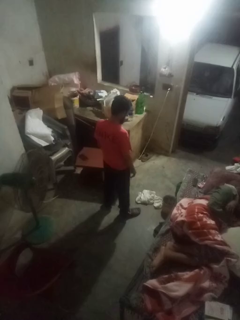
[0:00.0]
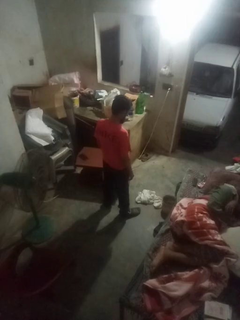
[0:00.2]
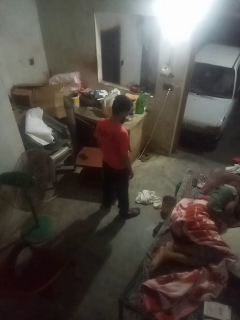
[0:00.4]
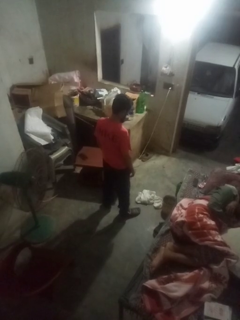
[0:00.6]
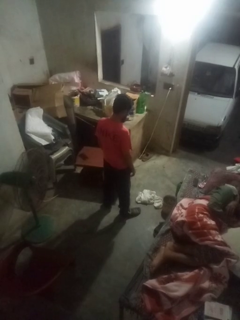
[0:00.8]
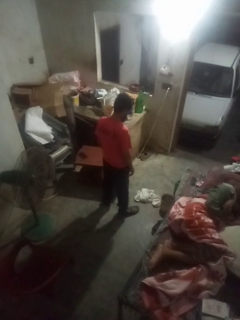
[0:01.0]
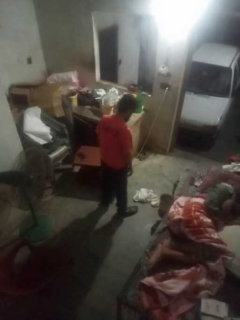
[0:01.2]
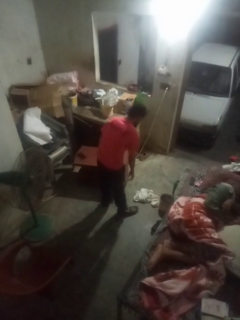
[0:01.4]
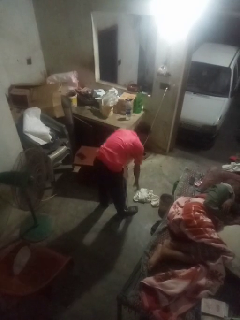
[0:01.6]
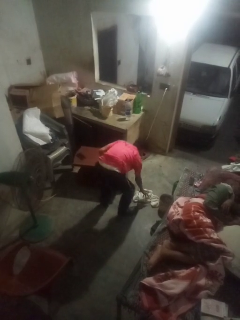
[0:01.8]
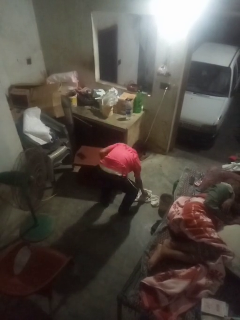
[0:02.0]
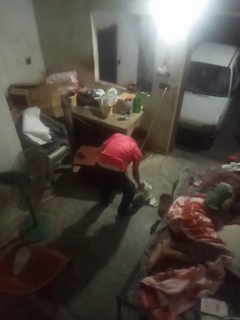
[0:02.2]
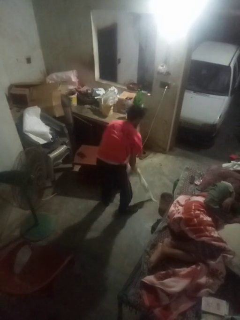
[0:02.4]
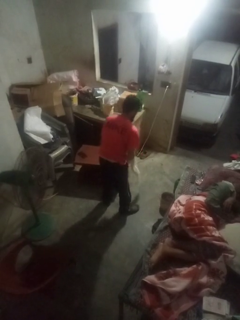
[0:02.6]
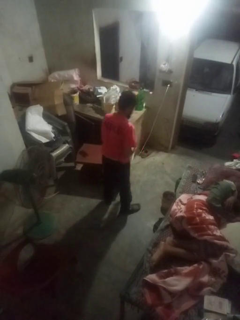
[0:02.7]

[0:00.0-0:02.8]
person picks up object from floor

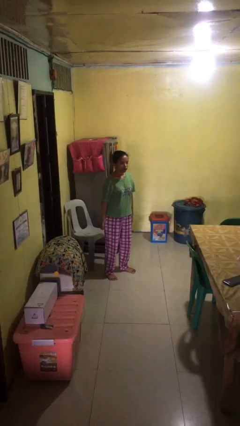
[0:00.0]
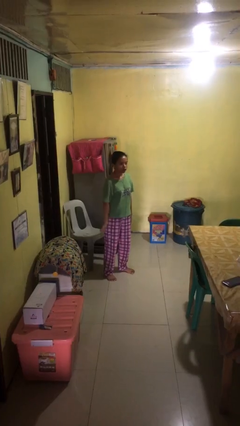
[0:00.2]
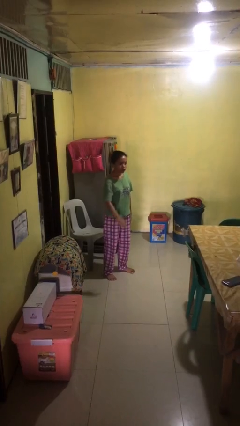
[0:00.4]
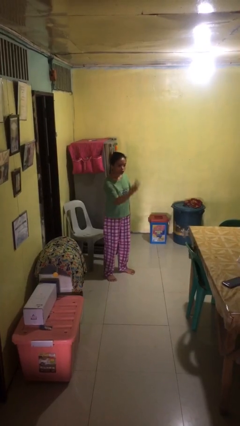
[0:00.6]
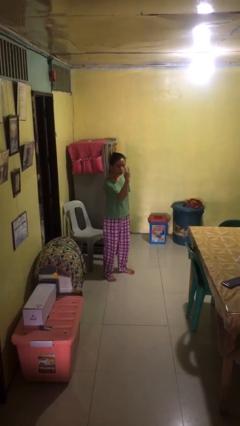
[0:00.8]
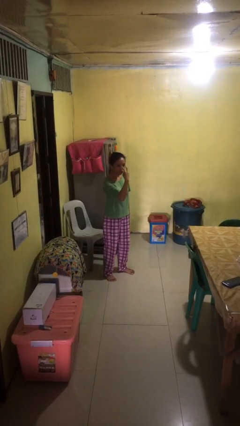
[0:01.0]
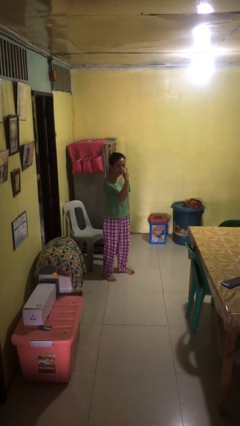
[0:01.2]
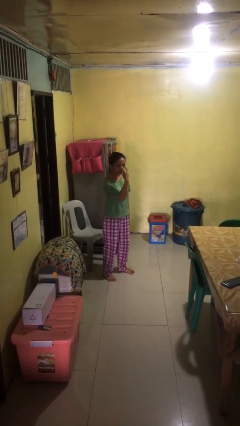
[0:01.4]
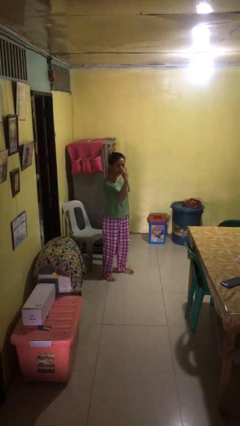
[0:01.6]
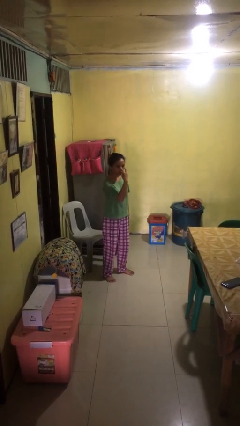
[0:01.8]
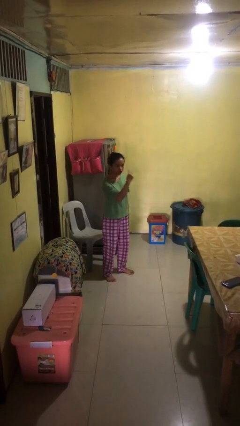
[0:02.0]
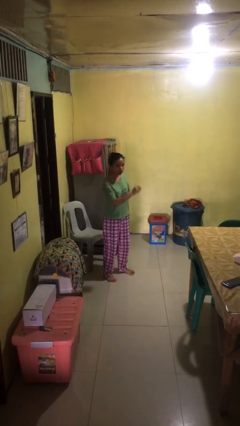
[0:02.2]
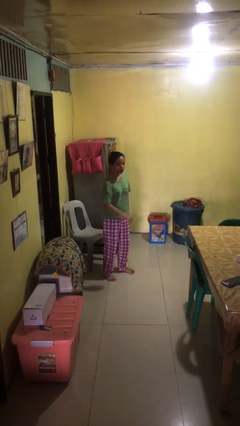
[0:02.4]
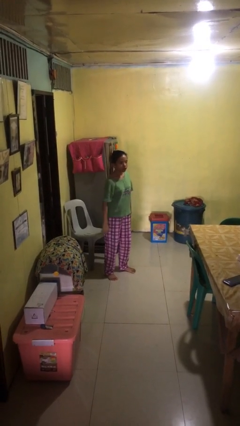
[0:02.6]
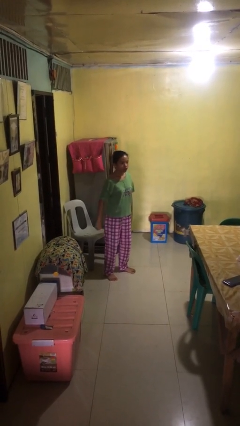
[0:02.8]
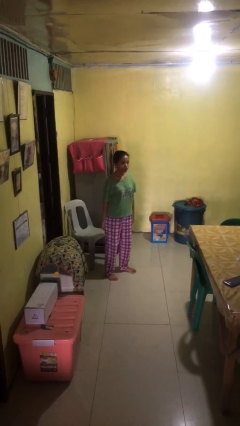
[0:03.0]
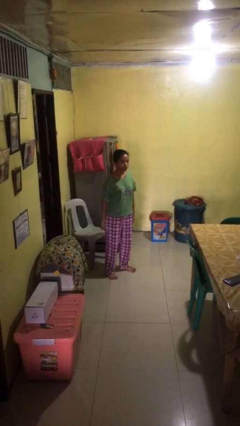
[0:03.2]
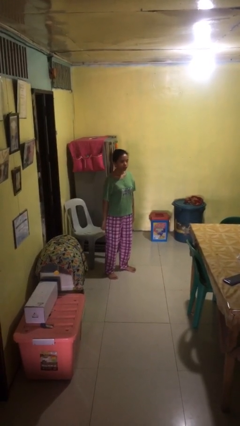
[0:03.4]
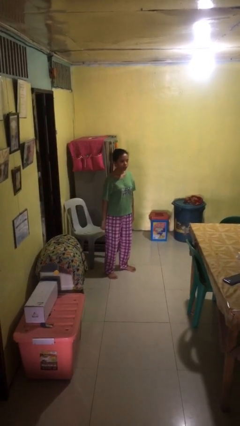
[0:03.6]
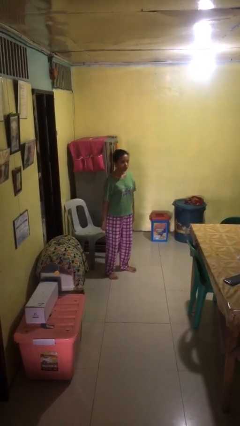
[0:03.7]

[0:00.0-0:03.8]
person gestures watch closely

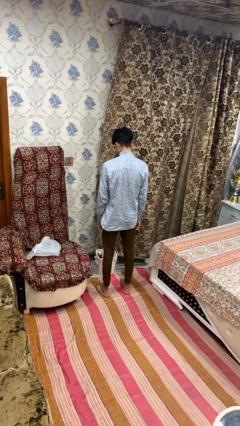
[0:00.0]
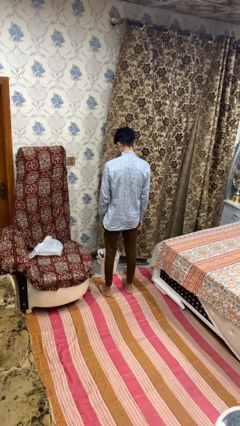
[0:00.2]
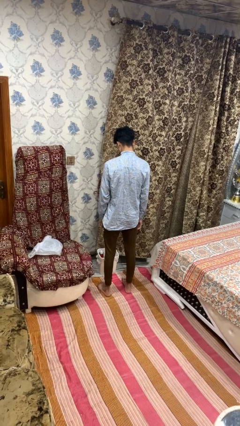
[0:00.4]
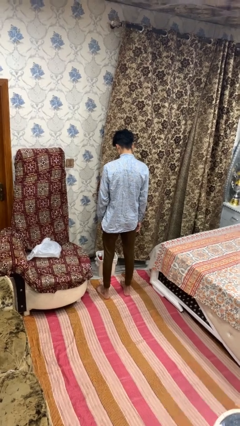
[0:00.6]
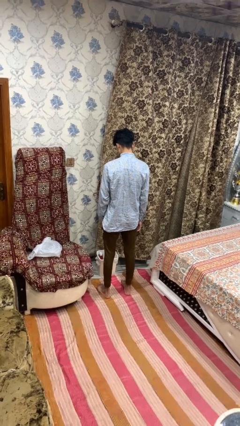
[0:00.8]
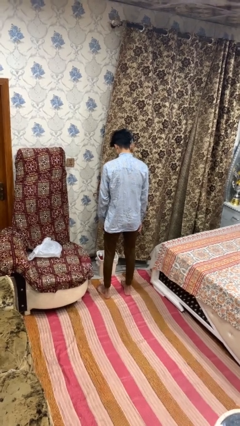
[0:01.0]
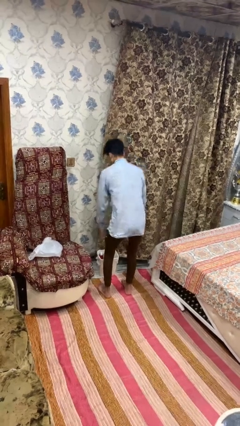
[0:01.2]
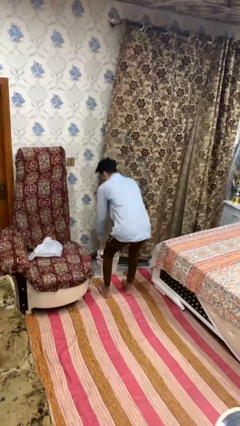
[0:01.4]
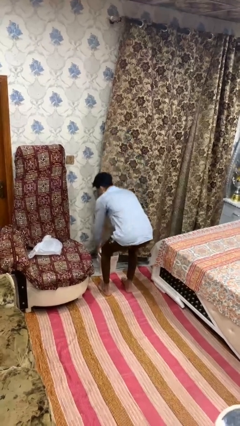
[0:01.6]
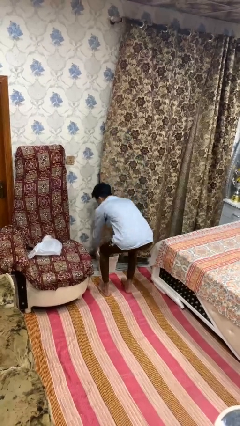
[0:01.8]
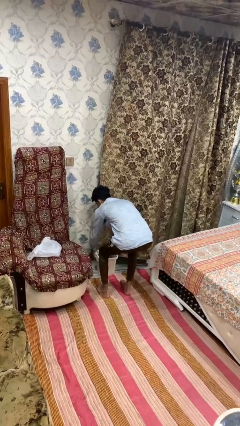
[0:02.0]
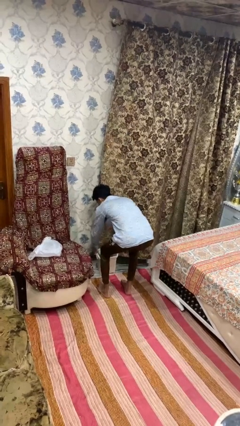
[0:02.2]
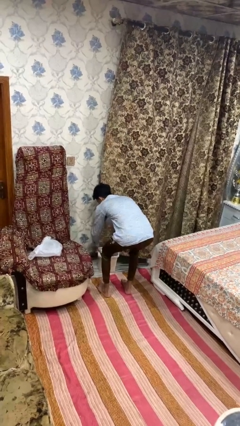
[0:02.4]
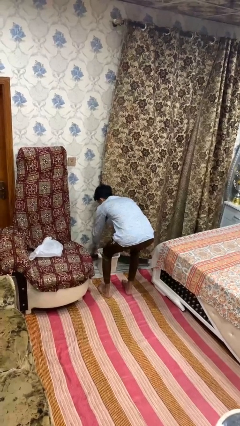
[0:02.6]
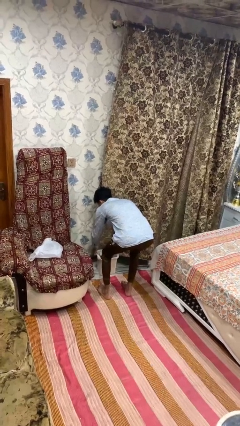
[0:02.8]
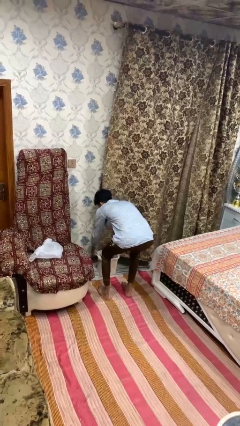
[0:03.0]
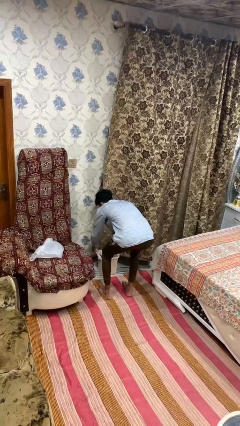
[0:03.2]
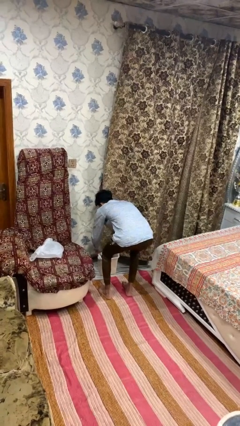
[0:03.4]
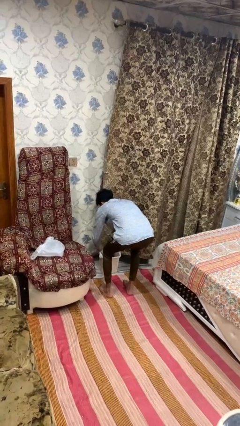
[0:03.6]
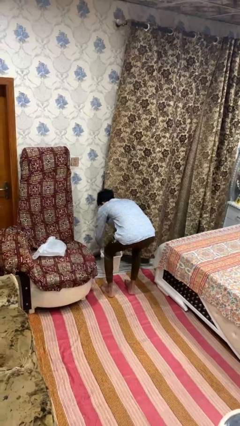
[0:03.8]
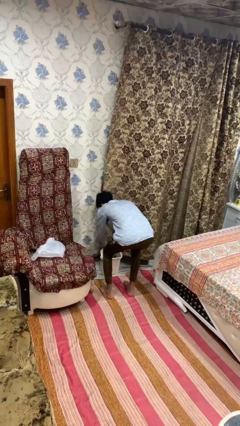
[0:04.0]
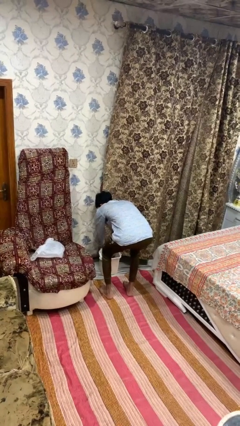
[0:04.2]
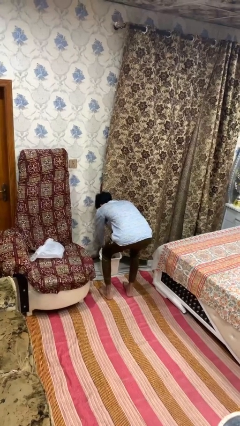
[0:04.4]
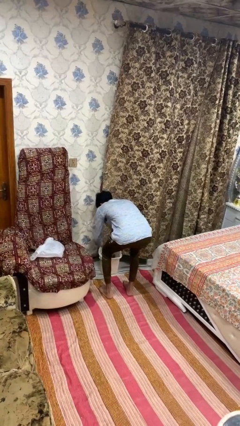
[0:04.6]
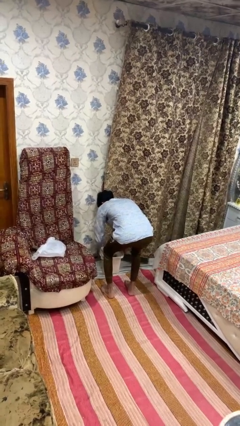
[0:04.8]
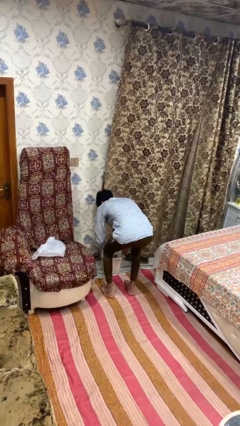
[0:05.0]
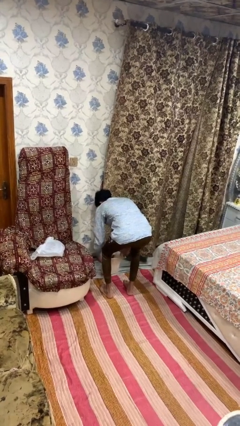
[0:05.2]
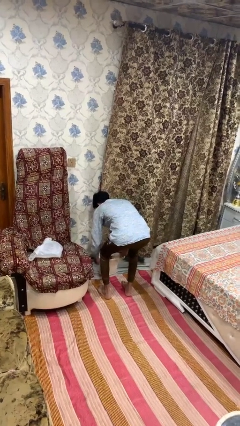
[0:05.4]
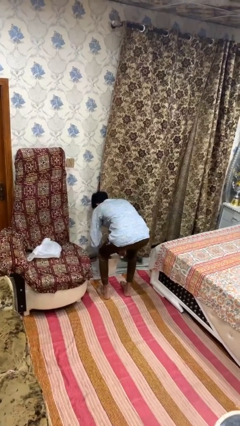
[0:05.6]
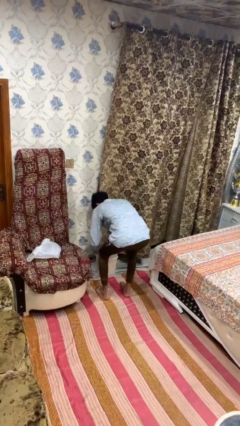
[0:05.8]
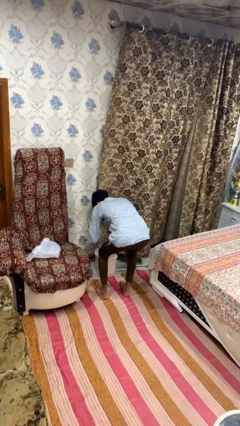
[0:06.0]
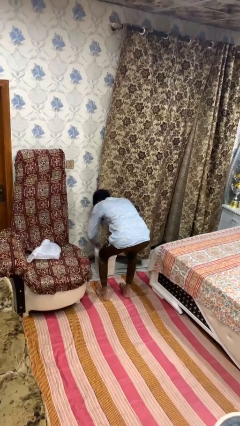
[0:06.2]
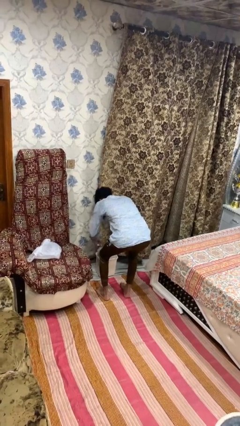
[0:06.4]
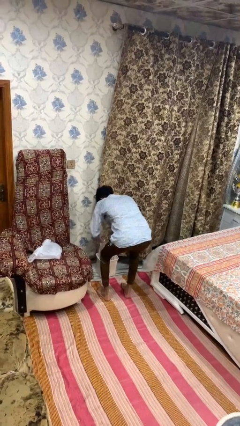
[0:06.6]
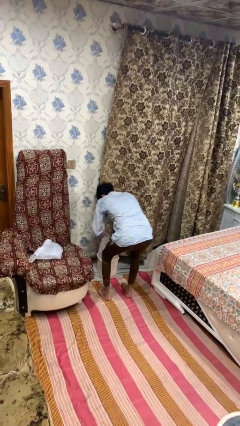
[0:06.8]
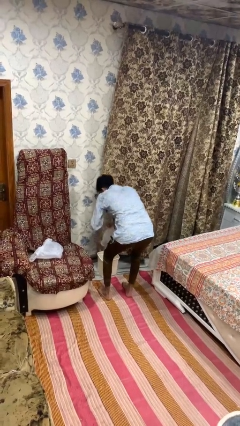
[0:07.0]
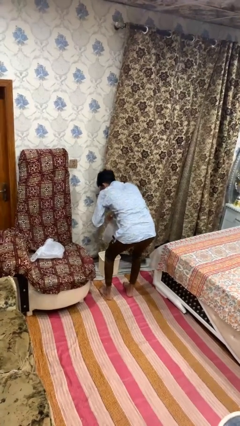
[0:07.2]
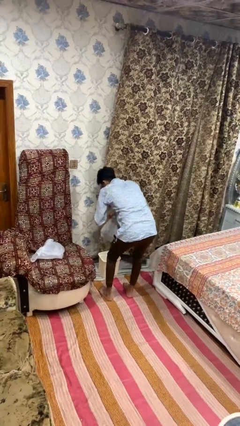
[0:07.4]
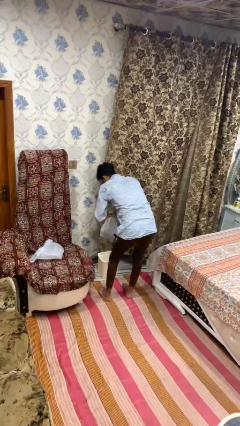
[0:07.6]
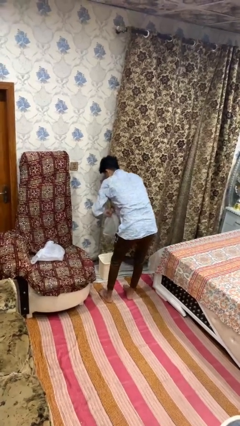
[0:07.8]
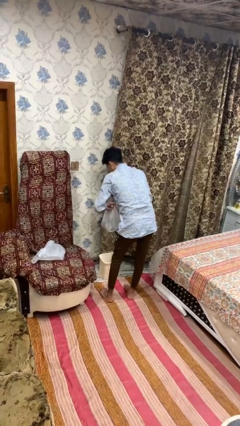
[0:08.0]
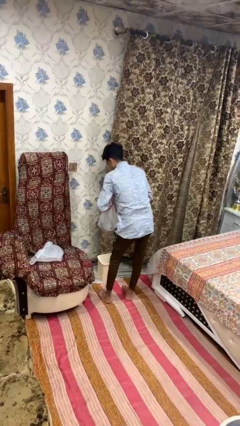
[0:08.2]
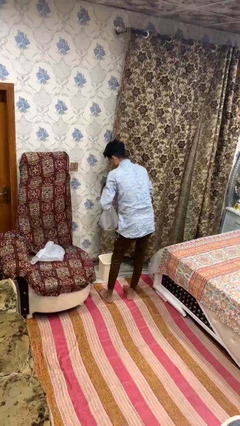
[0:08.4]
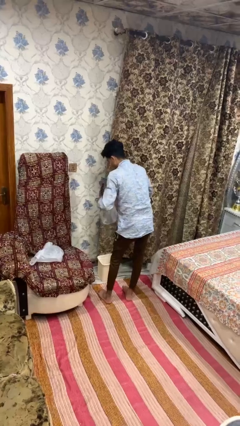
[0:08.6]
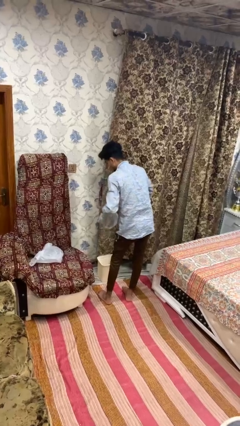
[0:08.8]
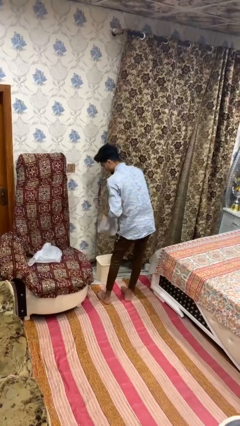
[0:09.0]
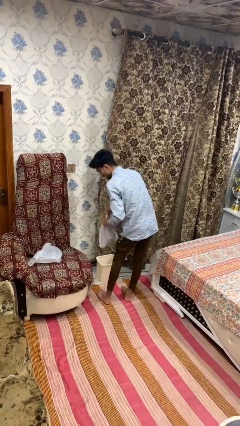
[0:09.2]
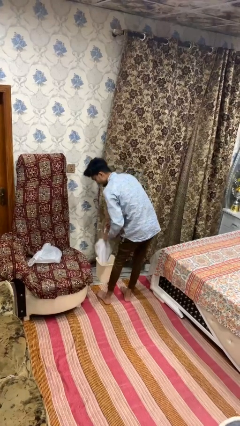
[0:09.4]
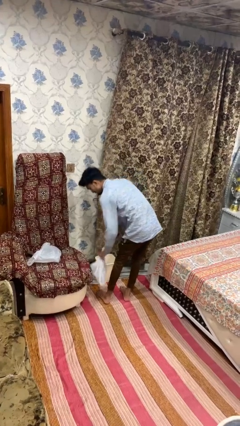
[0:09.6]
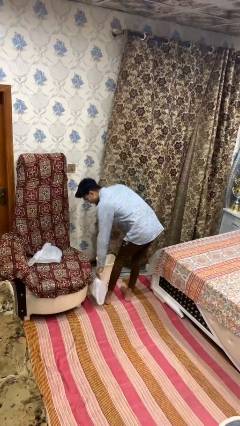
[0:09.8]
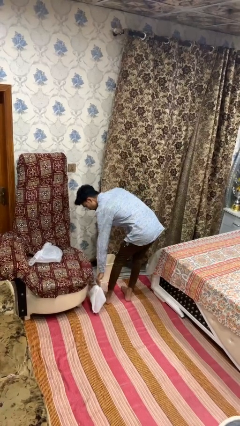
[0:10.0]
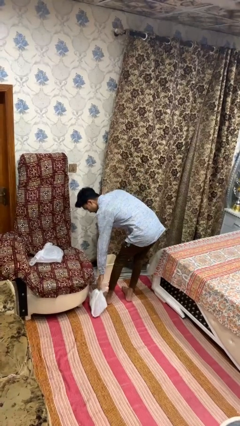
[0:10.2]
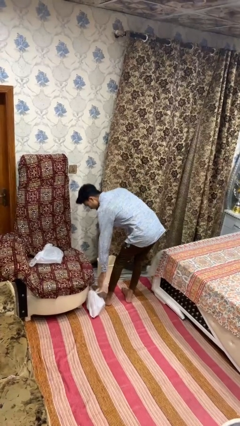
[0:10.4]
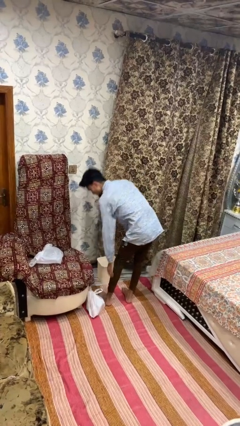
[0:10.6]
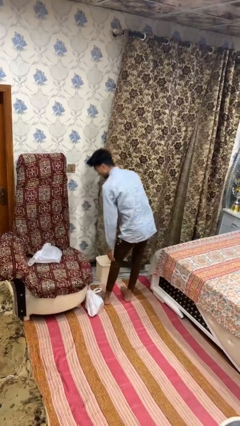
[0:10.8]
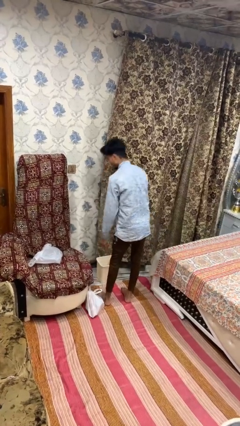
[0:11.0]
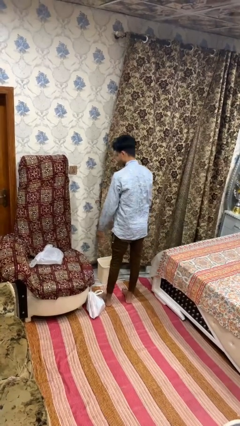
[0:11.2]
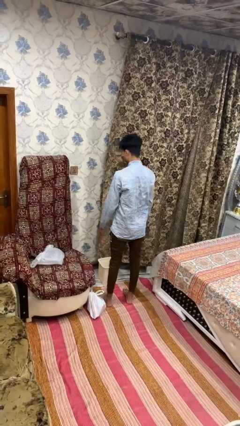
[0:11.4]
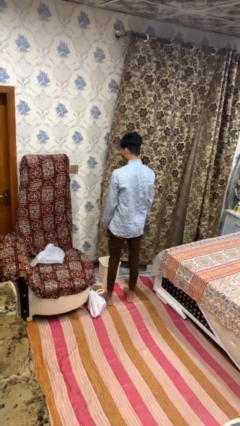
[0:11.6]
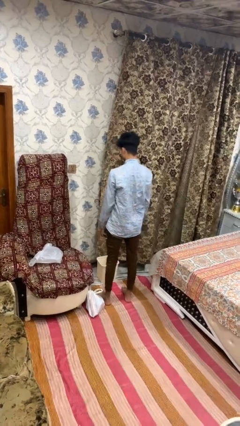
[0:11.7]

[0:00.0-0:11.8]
person removes trashbag from trashcan
